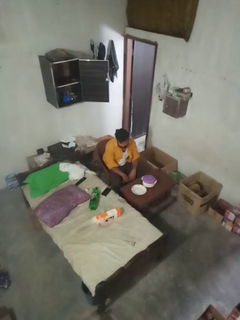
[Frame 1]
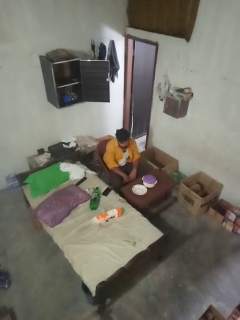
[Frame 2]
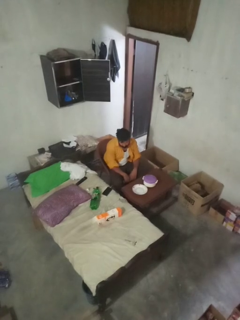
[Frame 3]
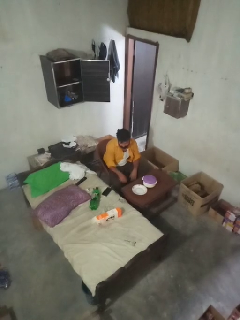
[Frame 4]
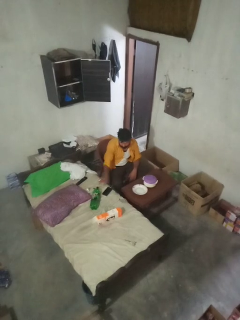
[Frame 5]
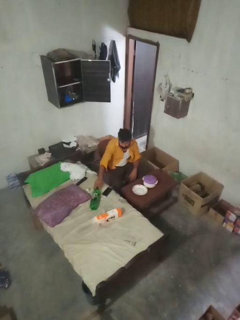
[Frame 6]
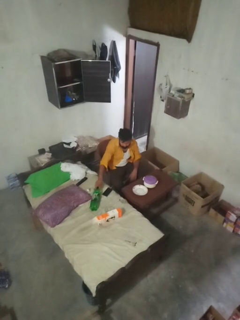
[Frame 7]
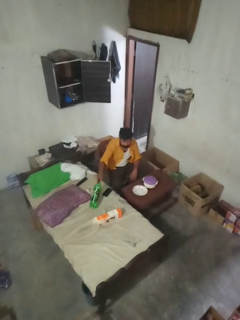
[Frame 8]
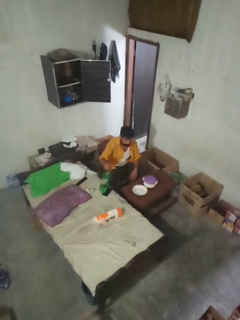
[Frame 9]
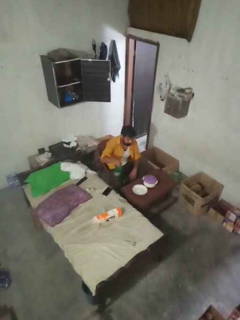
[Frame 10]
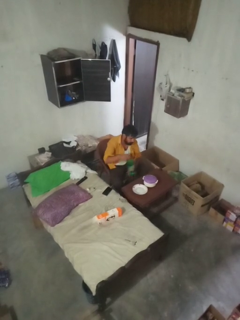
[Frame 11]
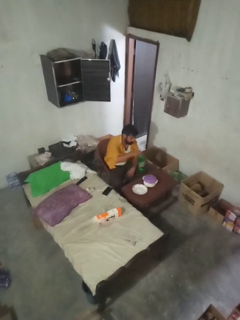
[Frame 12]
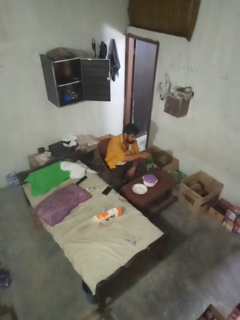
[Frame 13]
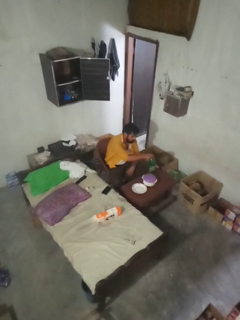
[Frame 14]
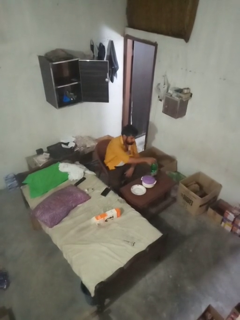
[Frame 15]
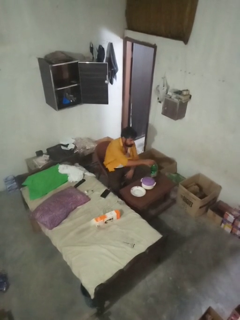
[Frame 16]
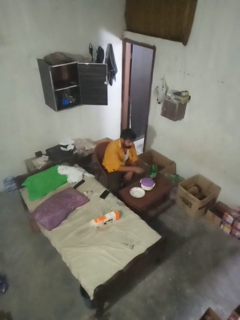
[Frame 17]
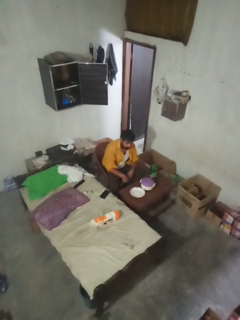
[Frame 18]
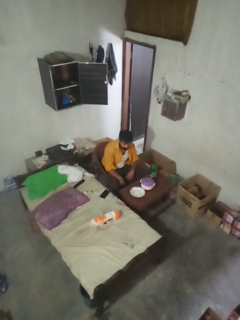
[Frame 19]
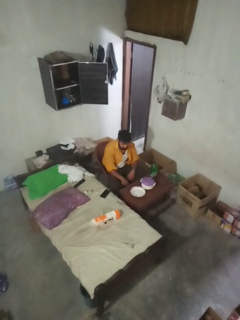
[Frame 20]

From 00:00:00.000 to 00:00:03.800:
person sets table

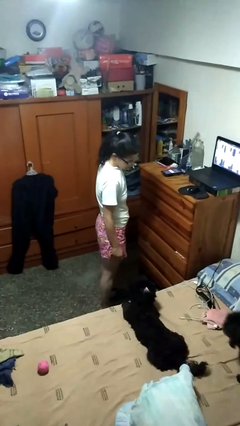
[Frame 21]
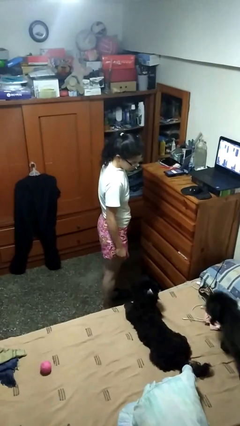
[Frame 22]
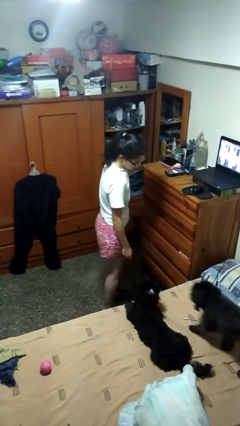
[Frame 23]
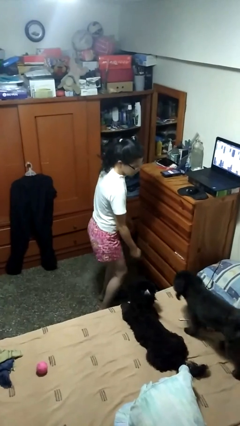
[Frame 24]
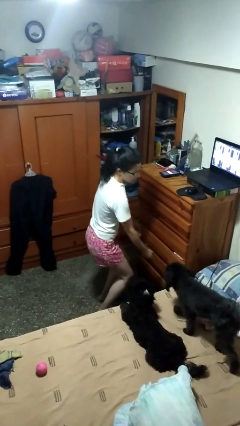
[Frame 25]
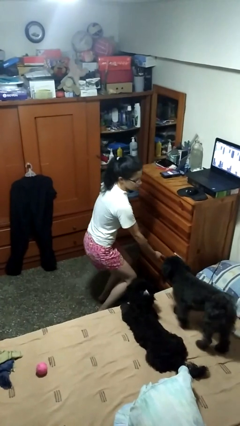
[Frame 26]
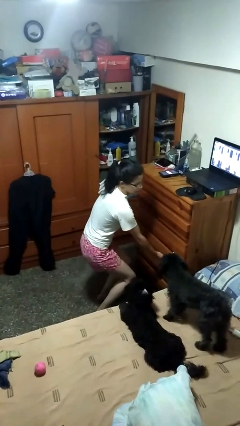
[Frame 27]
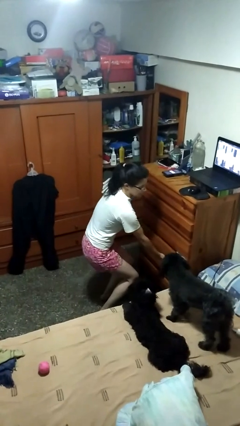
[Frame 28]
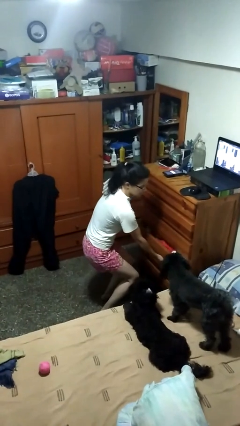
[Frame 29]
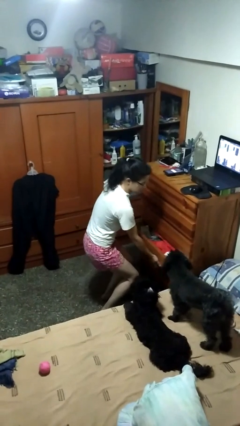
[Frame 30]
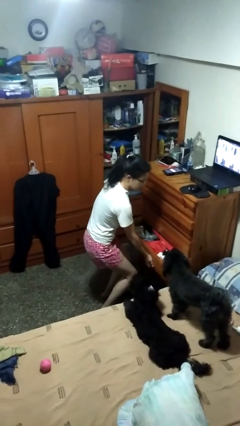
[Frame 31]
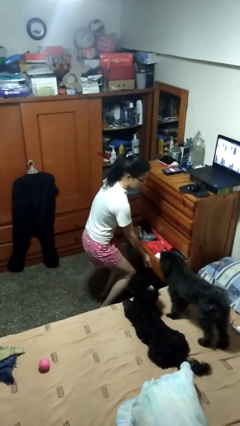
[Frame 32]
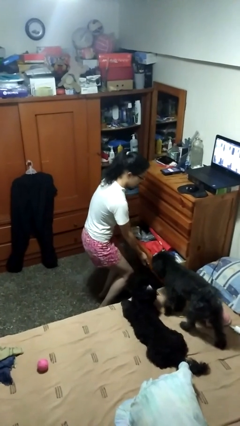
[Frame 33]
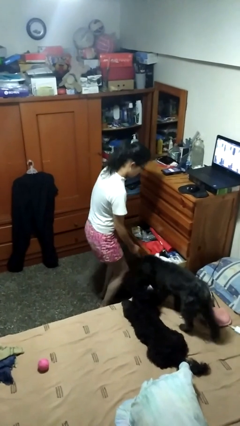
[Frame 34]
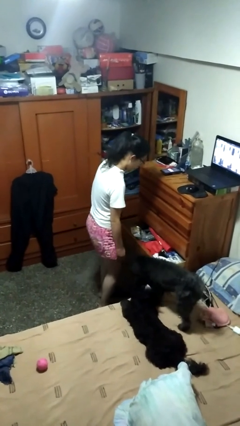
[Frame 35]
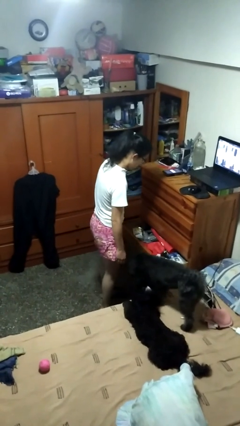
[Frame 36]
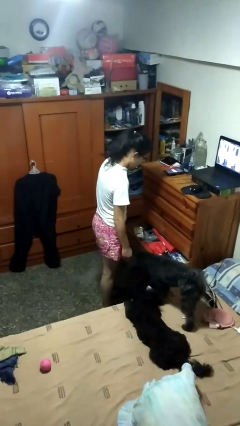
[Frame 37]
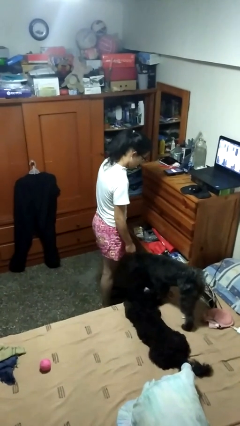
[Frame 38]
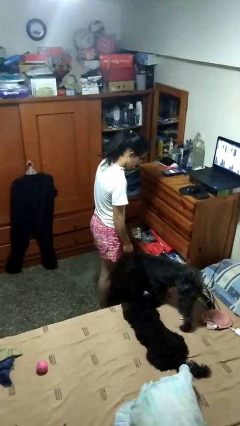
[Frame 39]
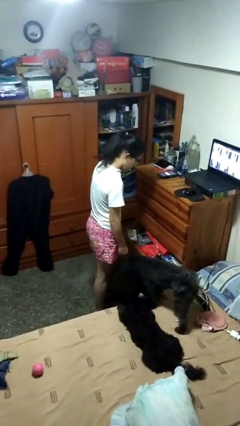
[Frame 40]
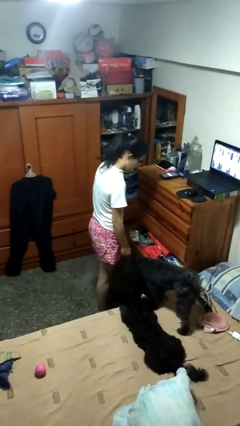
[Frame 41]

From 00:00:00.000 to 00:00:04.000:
person opens dresser drawer

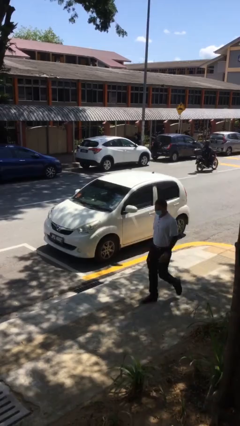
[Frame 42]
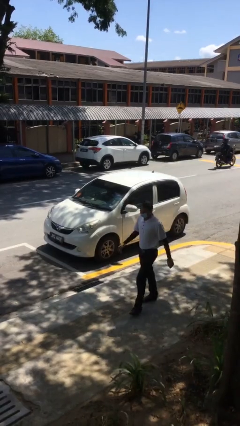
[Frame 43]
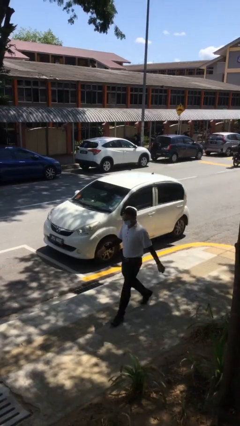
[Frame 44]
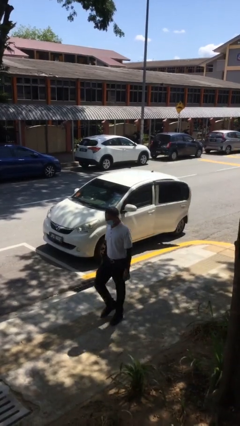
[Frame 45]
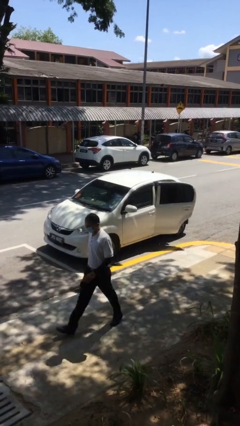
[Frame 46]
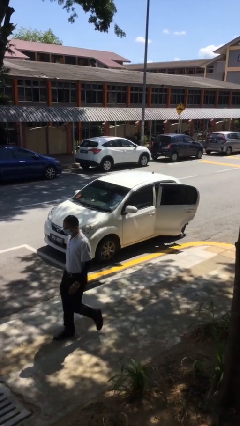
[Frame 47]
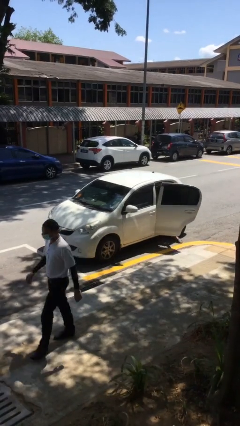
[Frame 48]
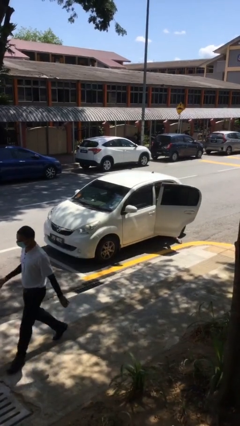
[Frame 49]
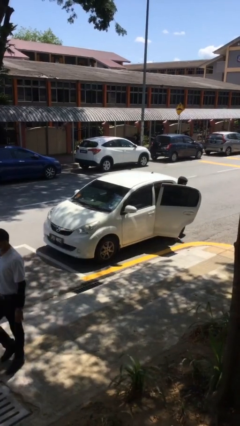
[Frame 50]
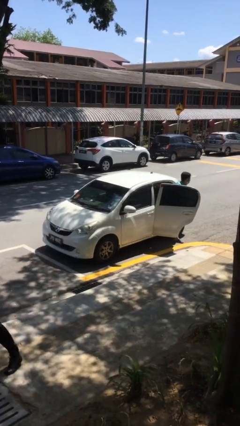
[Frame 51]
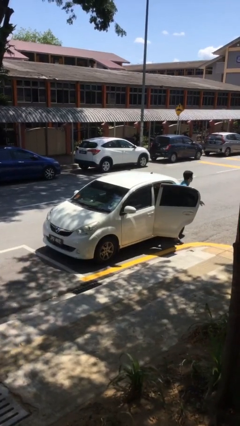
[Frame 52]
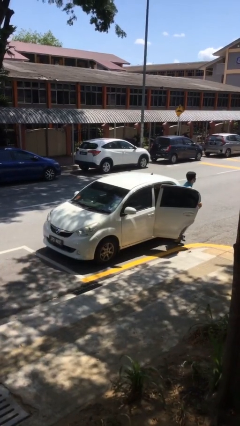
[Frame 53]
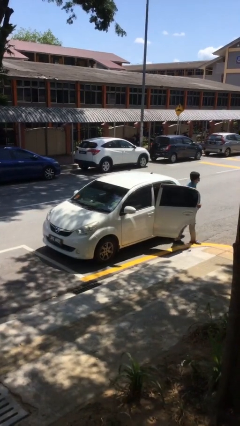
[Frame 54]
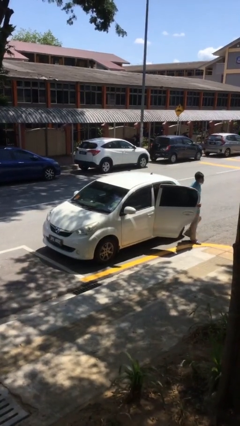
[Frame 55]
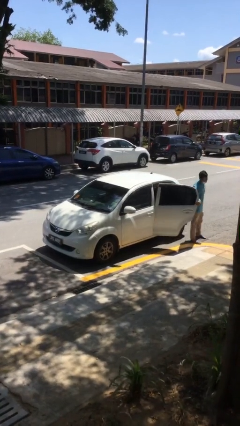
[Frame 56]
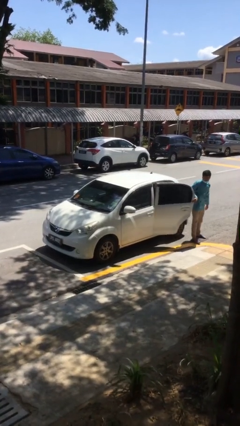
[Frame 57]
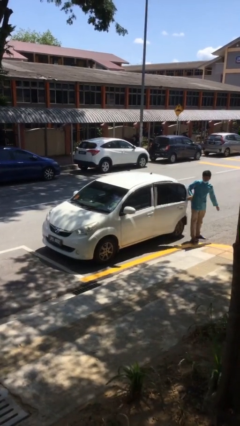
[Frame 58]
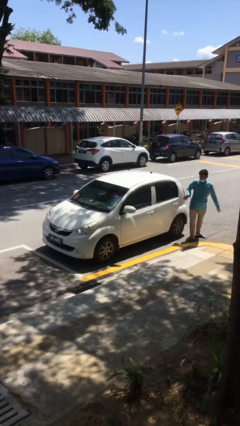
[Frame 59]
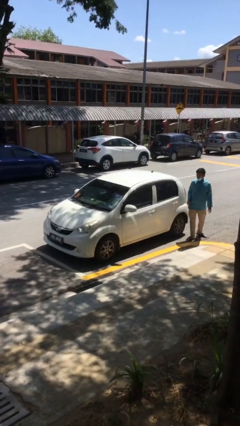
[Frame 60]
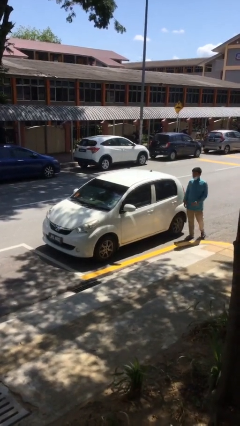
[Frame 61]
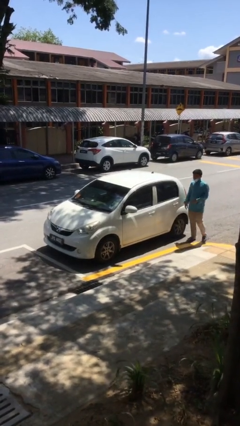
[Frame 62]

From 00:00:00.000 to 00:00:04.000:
car drops off person

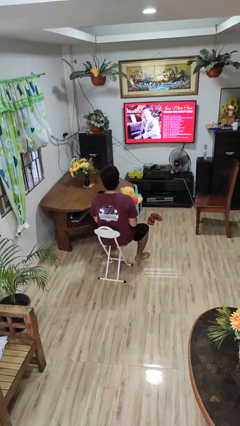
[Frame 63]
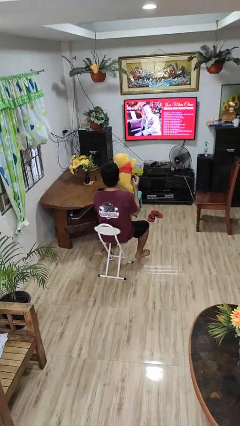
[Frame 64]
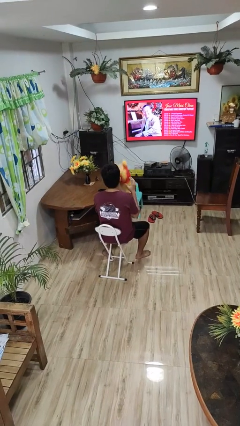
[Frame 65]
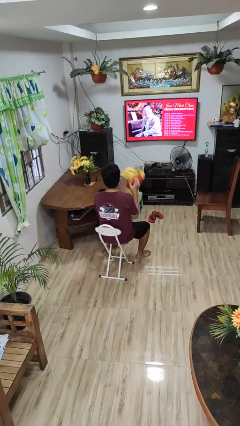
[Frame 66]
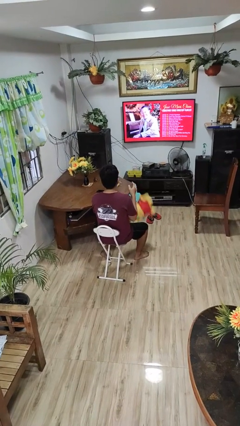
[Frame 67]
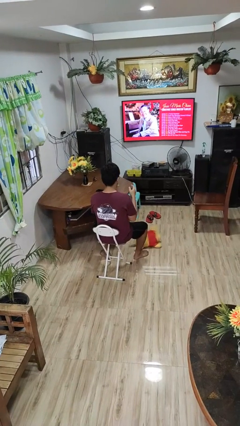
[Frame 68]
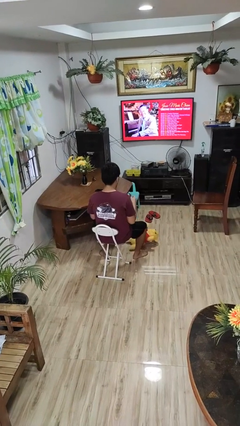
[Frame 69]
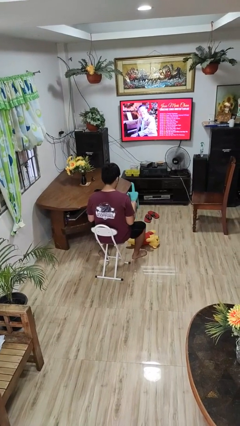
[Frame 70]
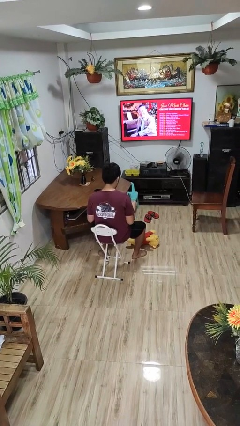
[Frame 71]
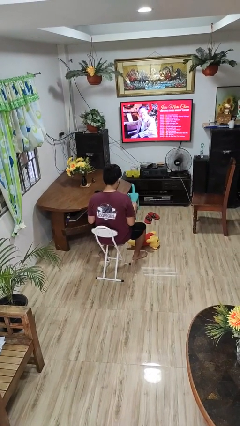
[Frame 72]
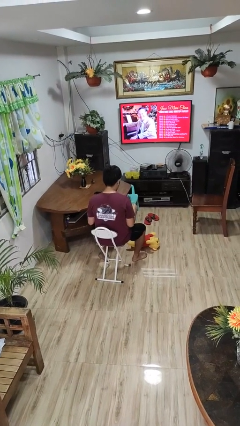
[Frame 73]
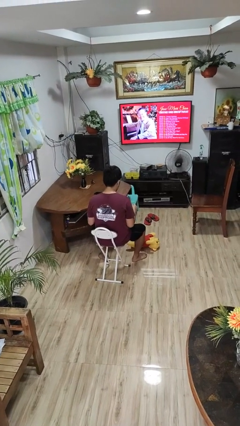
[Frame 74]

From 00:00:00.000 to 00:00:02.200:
person drops object

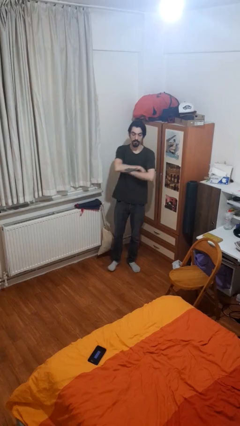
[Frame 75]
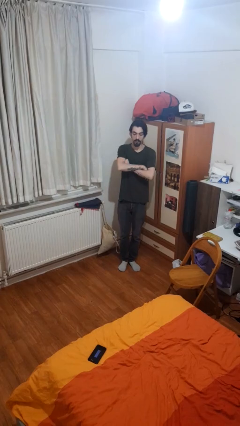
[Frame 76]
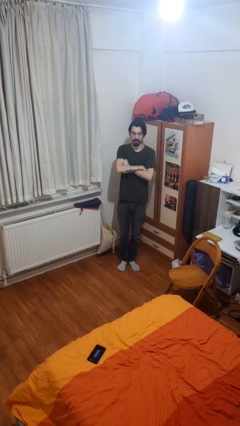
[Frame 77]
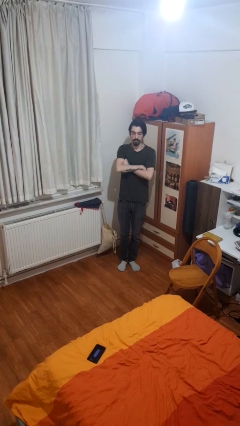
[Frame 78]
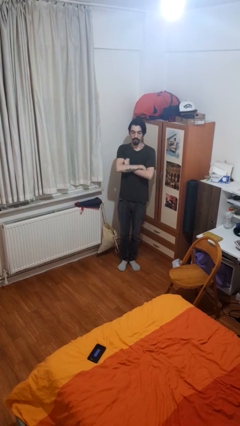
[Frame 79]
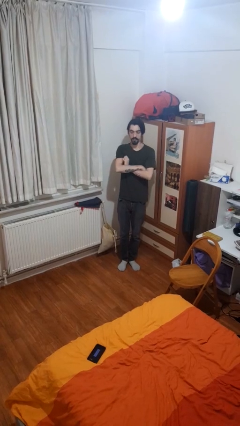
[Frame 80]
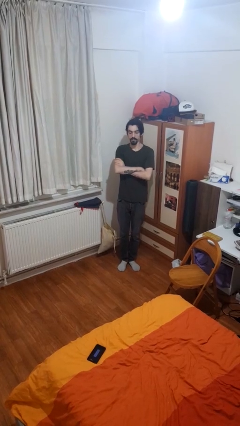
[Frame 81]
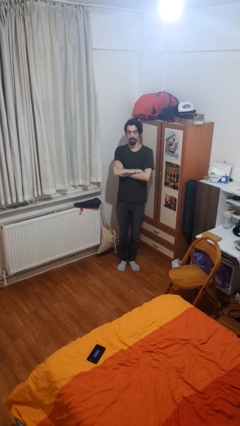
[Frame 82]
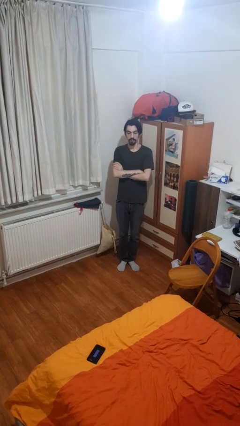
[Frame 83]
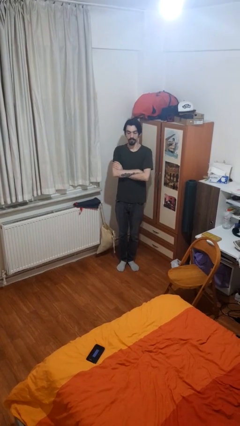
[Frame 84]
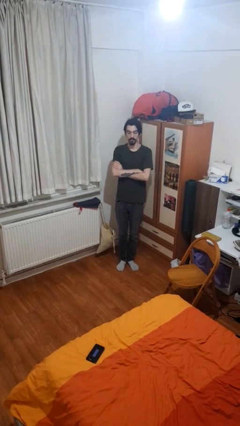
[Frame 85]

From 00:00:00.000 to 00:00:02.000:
person crosses arms

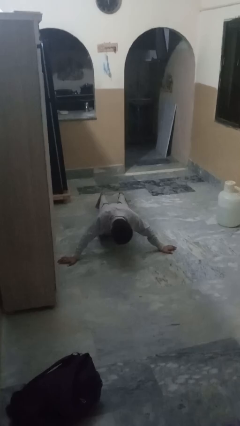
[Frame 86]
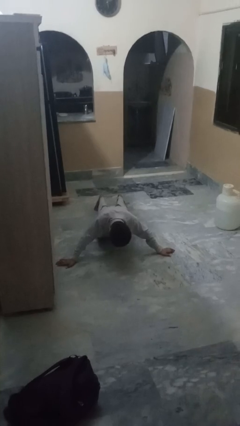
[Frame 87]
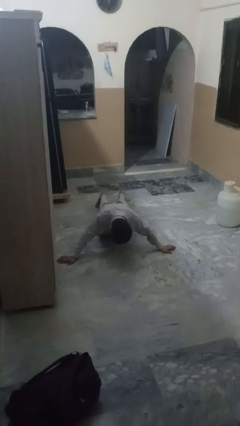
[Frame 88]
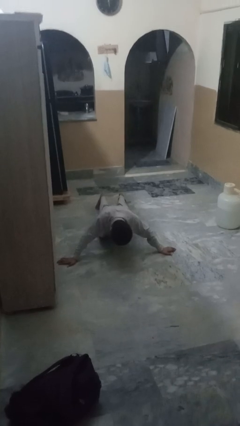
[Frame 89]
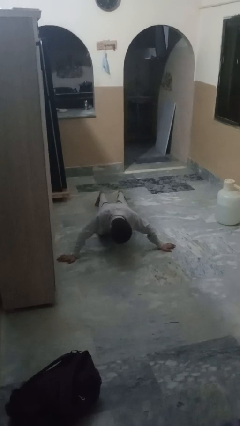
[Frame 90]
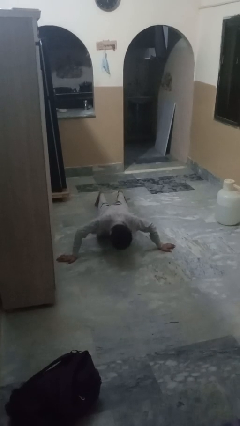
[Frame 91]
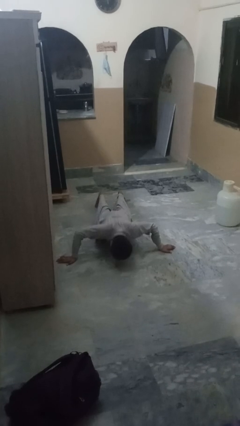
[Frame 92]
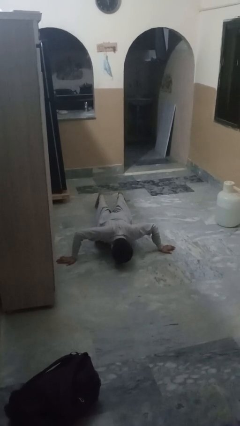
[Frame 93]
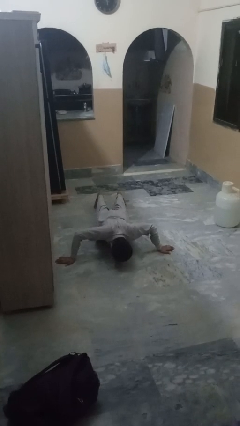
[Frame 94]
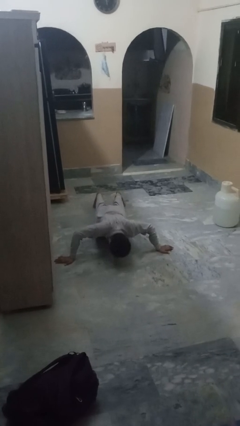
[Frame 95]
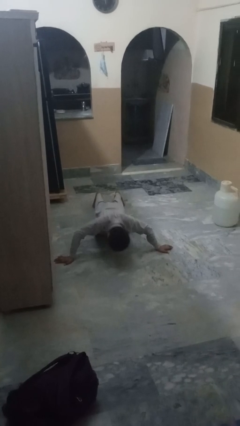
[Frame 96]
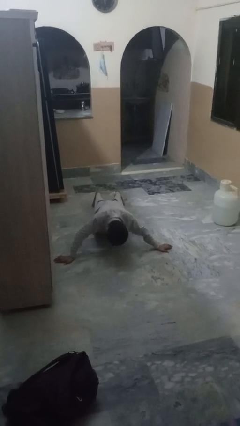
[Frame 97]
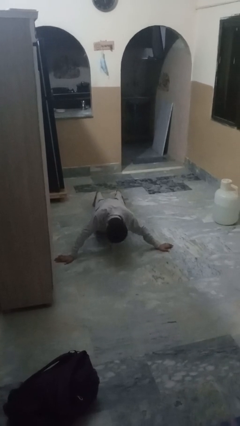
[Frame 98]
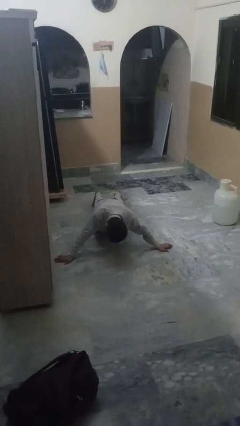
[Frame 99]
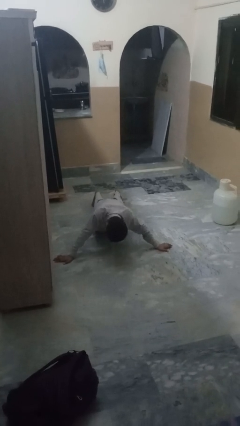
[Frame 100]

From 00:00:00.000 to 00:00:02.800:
person exercises with pushup
